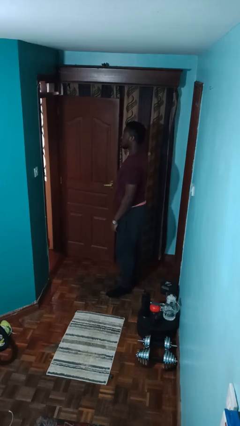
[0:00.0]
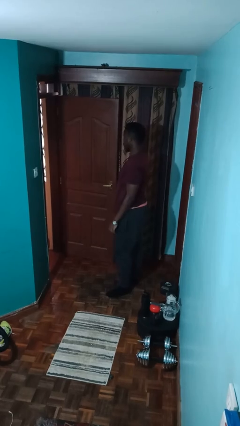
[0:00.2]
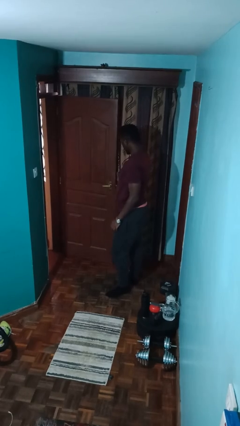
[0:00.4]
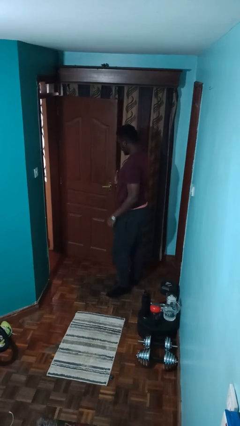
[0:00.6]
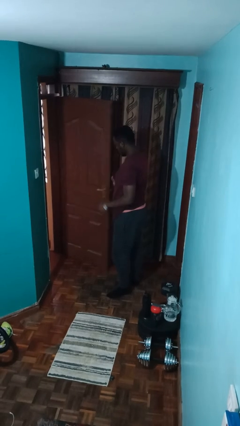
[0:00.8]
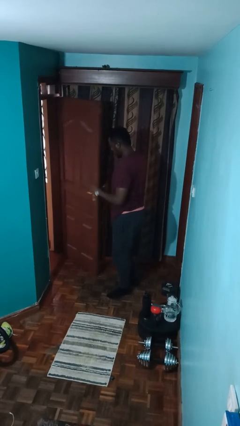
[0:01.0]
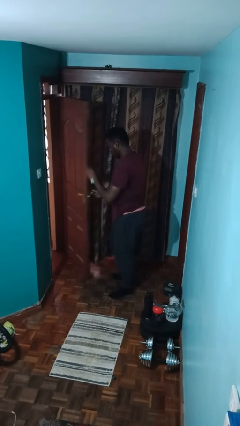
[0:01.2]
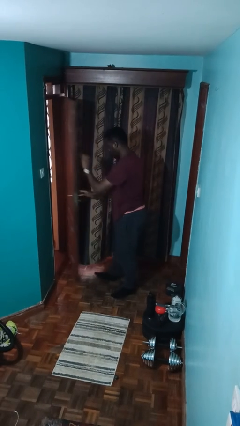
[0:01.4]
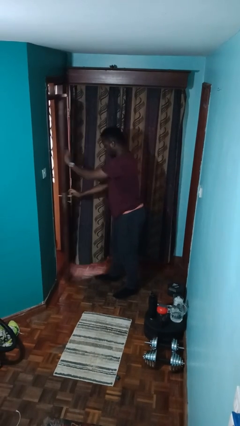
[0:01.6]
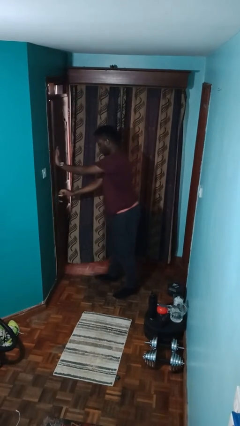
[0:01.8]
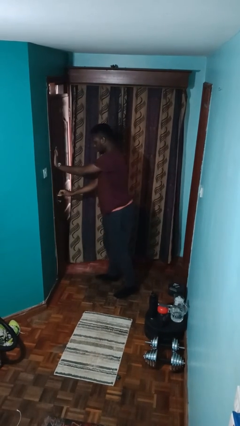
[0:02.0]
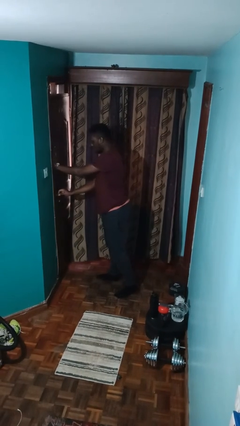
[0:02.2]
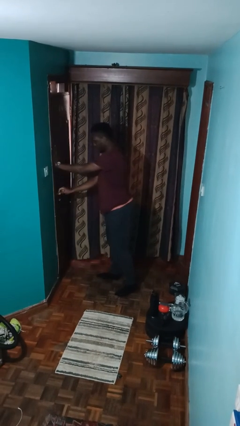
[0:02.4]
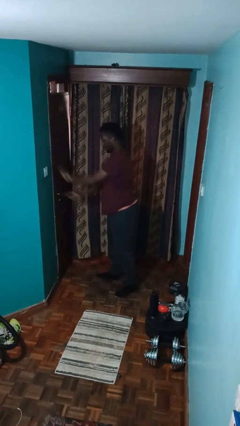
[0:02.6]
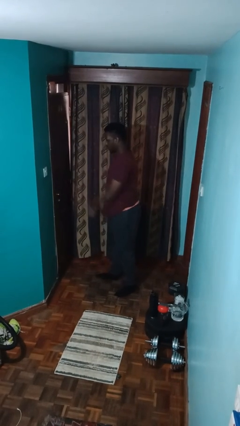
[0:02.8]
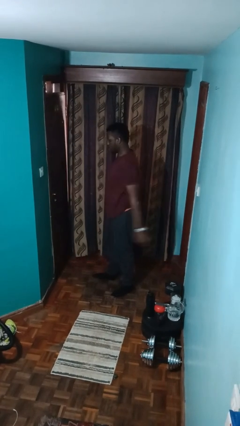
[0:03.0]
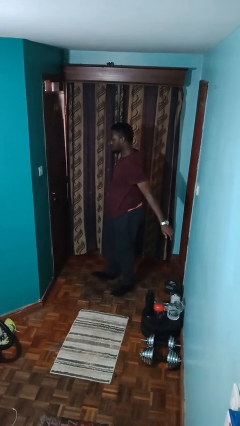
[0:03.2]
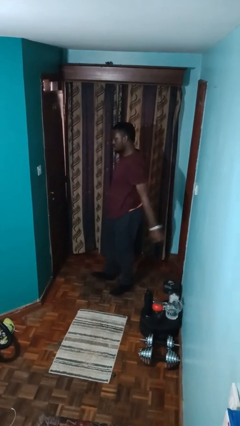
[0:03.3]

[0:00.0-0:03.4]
person closes facility door

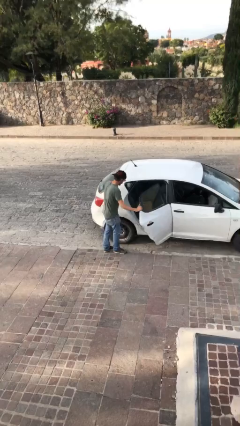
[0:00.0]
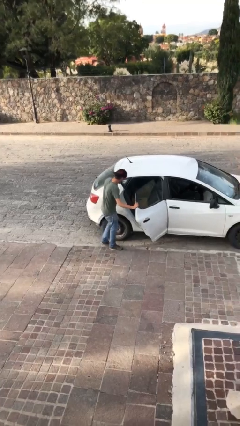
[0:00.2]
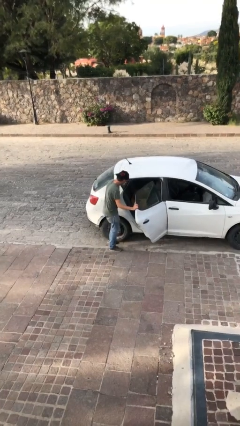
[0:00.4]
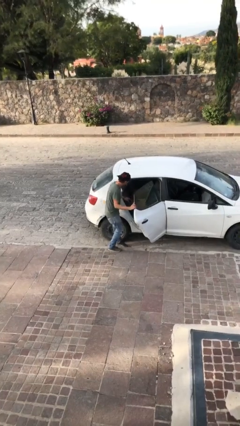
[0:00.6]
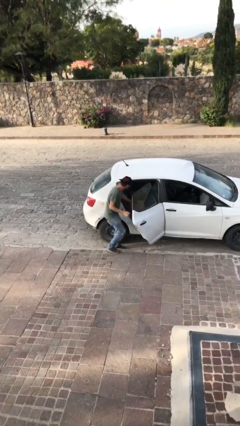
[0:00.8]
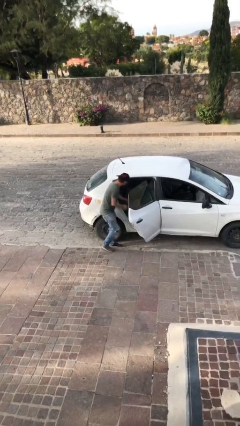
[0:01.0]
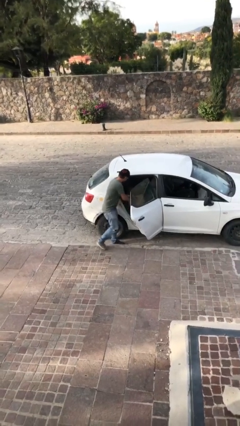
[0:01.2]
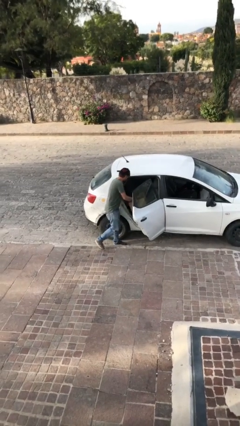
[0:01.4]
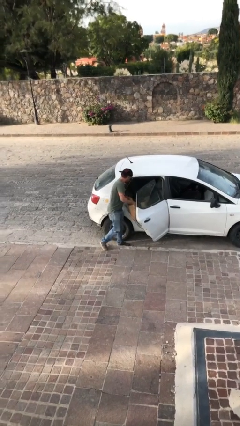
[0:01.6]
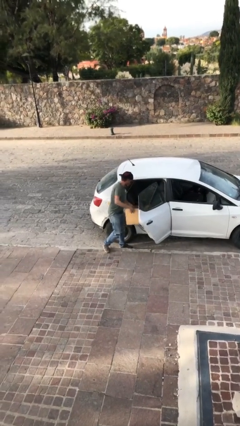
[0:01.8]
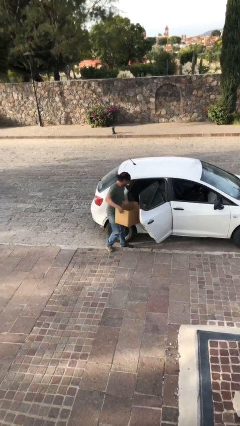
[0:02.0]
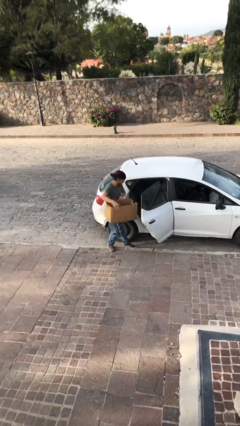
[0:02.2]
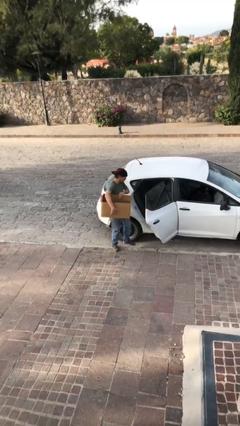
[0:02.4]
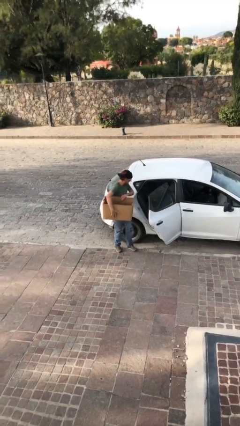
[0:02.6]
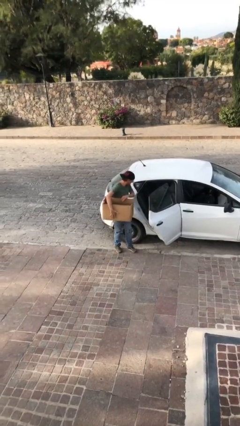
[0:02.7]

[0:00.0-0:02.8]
person unloads car

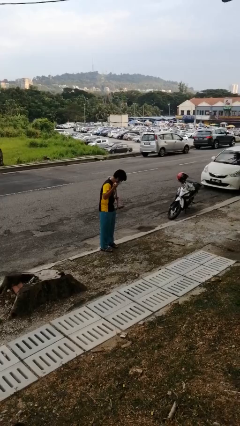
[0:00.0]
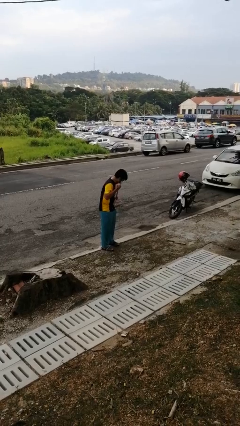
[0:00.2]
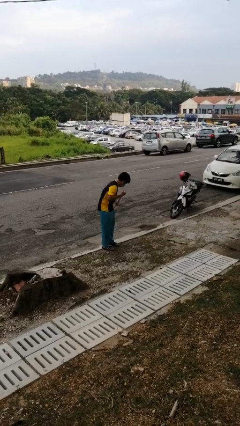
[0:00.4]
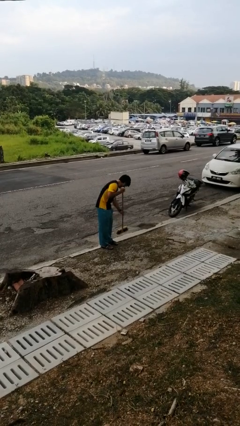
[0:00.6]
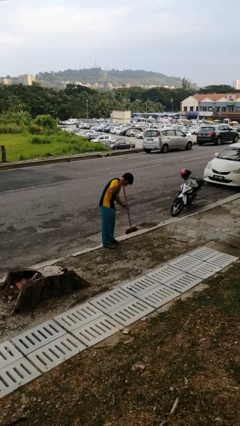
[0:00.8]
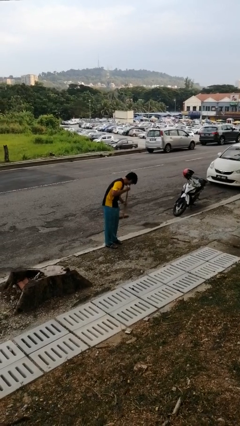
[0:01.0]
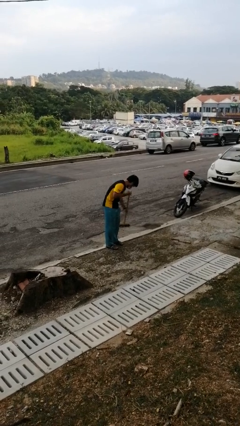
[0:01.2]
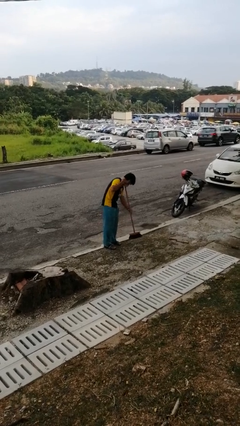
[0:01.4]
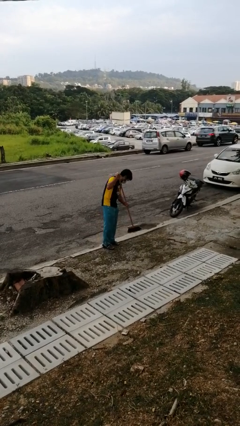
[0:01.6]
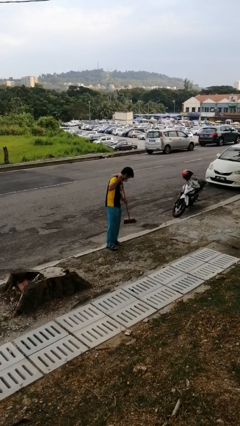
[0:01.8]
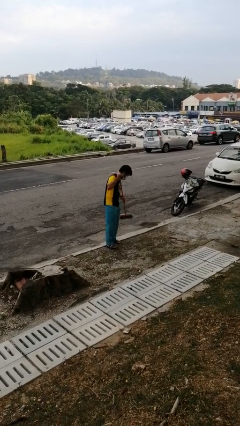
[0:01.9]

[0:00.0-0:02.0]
person sweeps floor

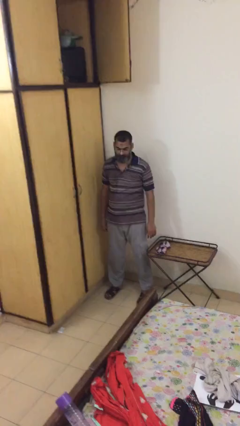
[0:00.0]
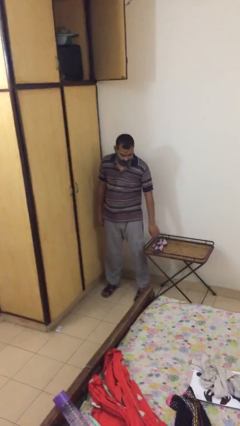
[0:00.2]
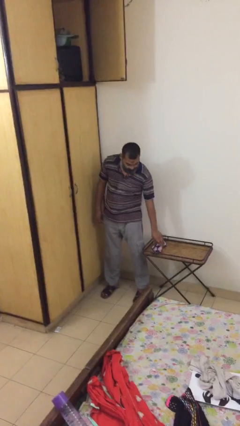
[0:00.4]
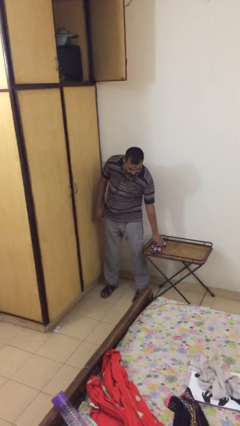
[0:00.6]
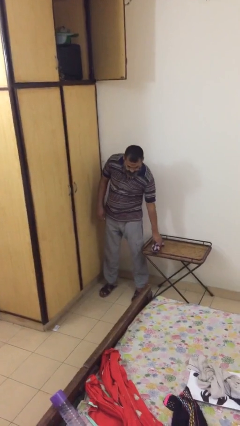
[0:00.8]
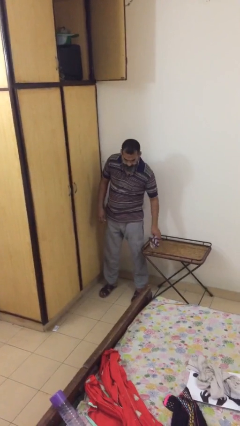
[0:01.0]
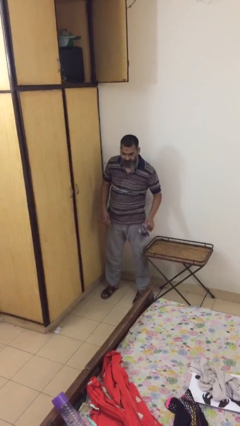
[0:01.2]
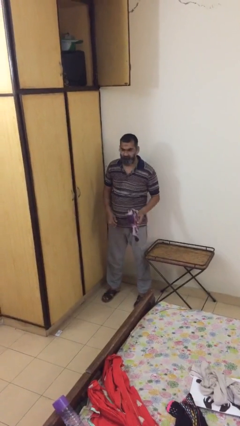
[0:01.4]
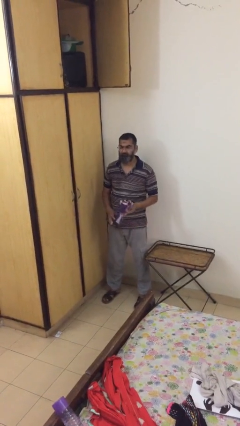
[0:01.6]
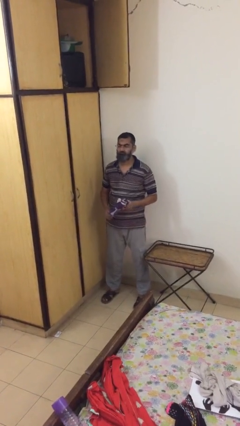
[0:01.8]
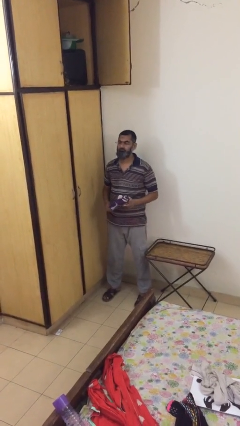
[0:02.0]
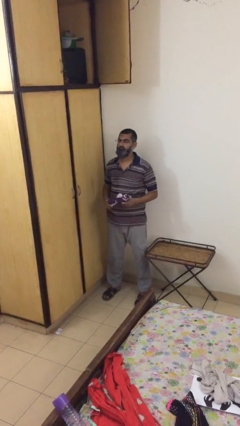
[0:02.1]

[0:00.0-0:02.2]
person picks up object from table

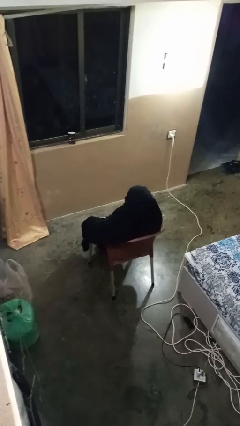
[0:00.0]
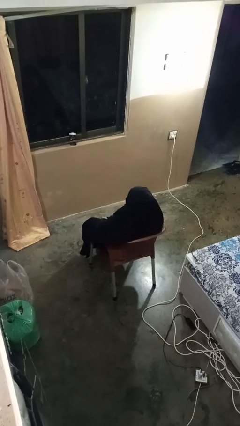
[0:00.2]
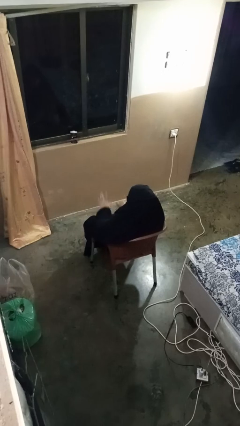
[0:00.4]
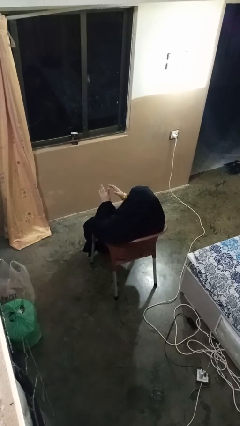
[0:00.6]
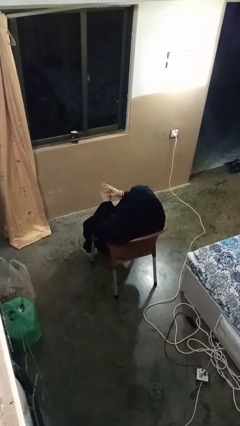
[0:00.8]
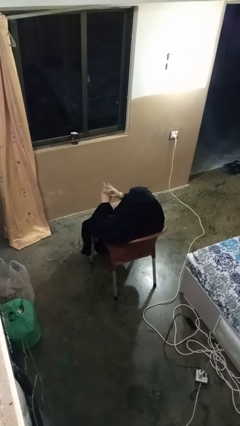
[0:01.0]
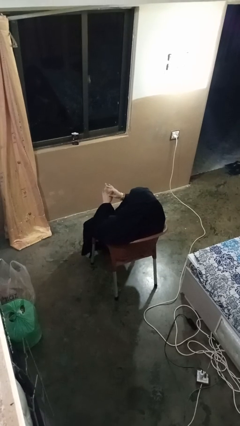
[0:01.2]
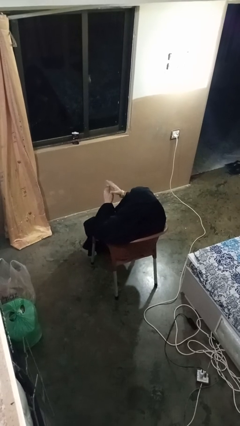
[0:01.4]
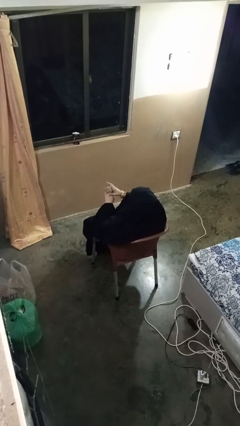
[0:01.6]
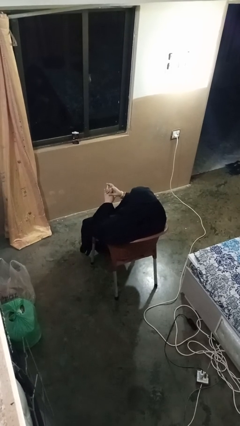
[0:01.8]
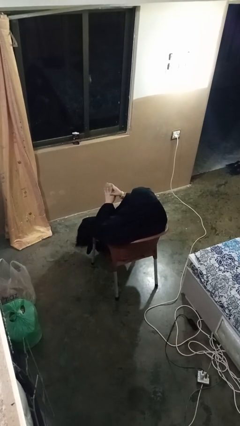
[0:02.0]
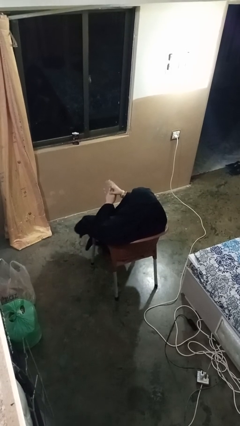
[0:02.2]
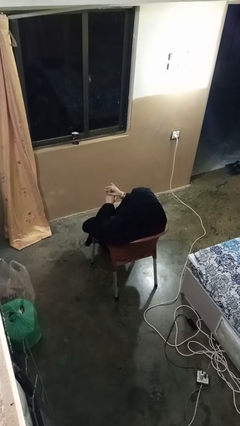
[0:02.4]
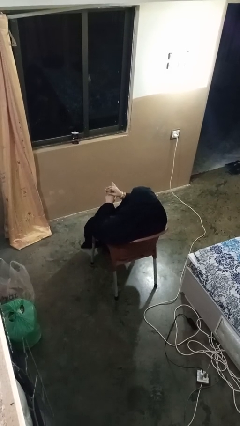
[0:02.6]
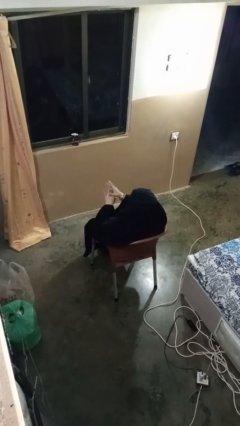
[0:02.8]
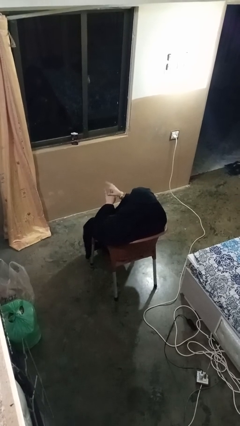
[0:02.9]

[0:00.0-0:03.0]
person cracks knuckles

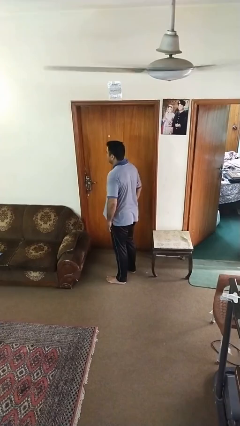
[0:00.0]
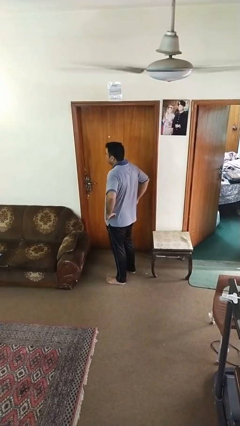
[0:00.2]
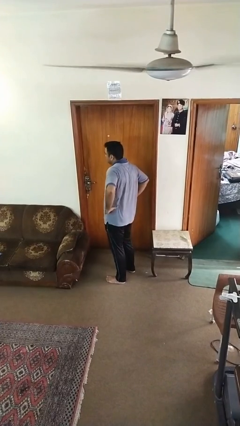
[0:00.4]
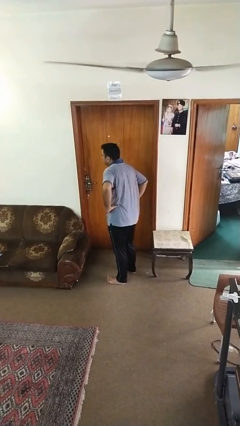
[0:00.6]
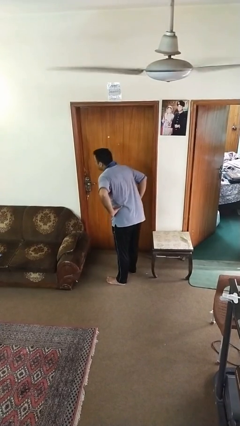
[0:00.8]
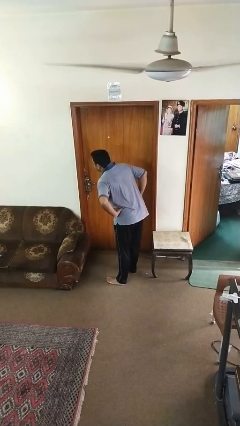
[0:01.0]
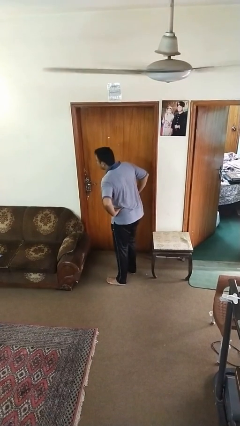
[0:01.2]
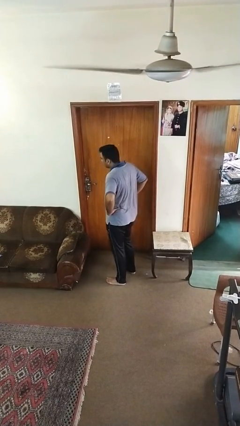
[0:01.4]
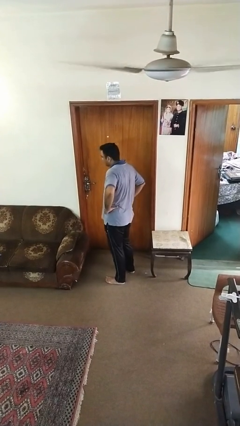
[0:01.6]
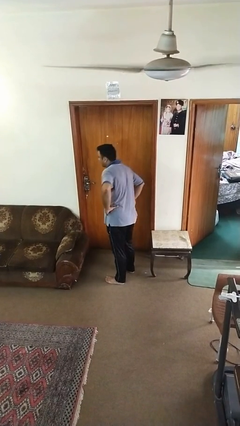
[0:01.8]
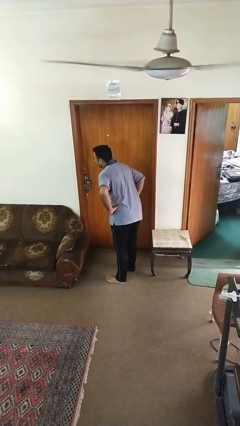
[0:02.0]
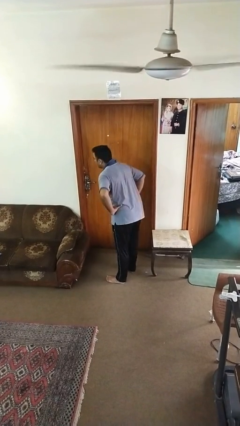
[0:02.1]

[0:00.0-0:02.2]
person wiggles hips

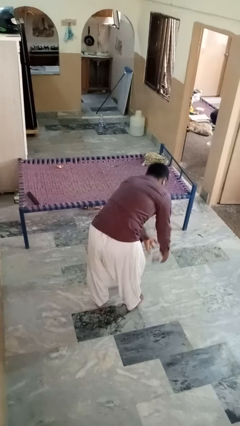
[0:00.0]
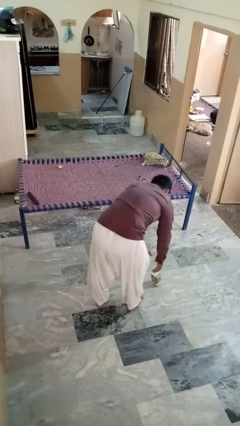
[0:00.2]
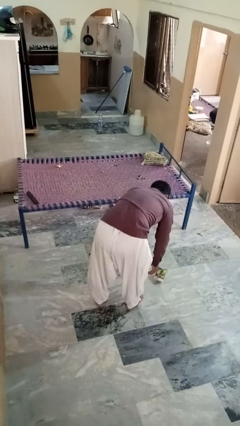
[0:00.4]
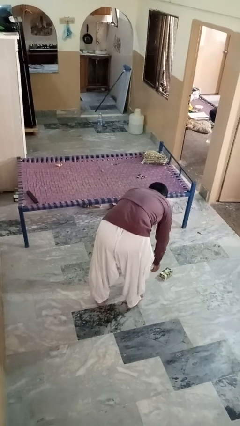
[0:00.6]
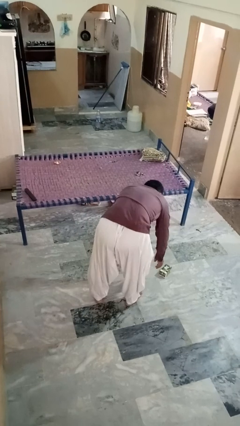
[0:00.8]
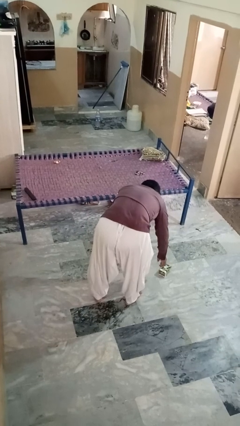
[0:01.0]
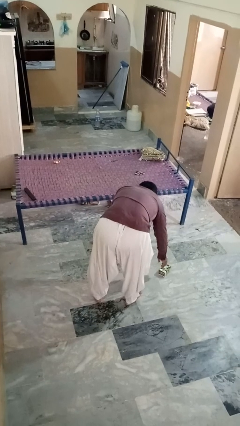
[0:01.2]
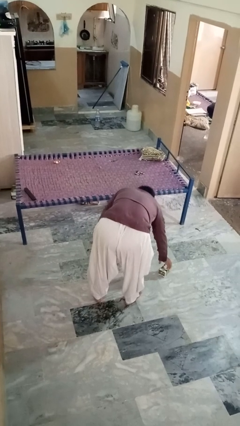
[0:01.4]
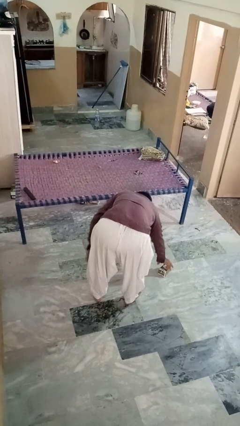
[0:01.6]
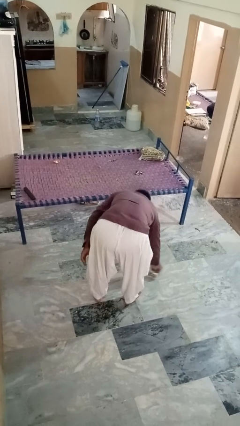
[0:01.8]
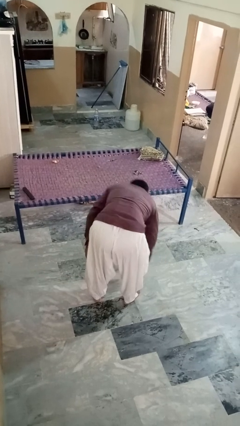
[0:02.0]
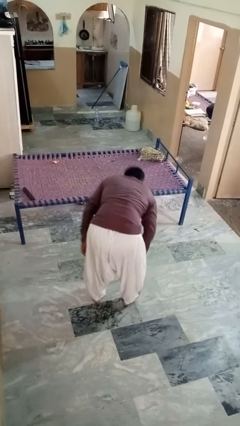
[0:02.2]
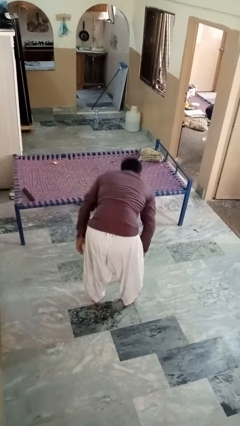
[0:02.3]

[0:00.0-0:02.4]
person catches dropped object
